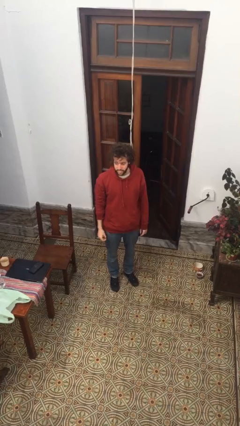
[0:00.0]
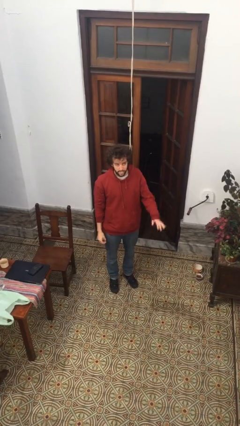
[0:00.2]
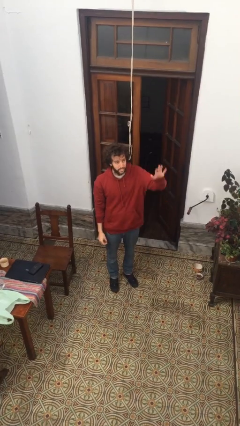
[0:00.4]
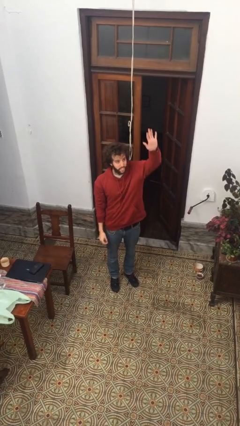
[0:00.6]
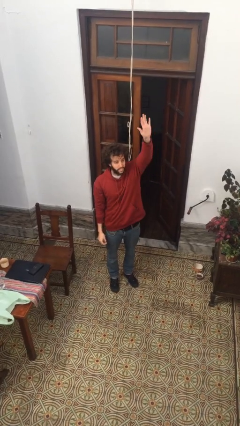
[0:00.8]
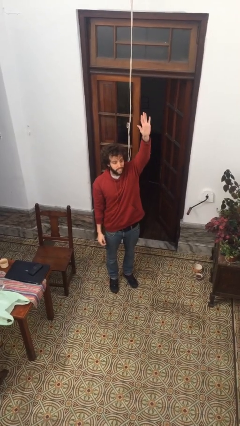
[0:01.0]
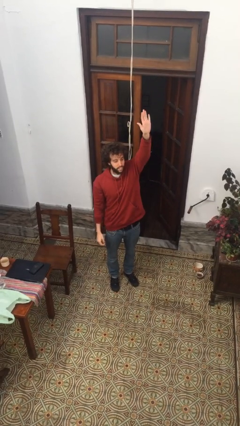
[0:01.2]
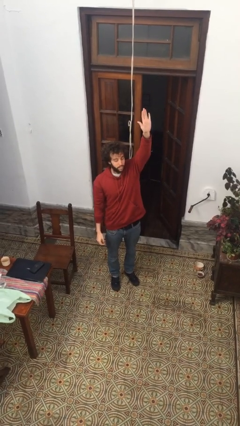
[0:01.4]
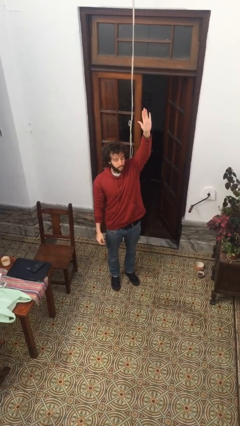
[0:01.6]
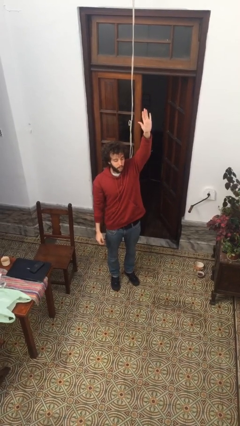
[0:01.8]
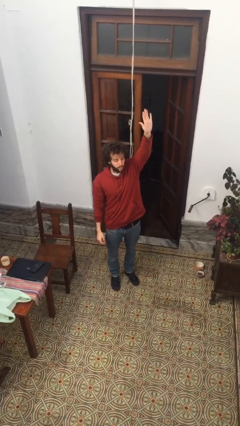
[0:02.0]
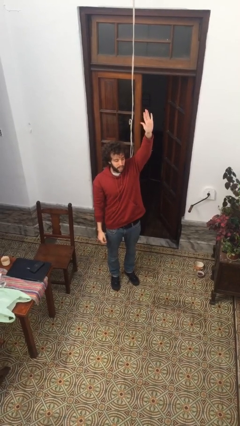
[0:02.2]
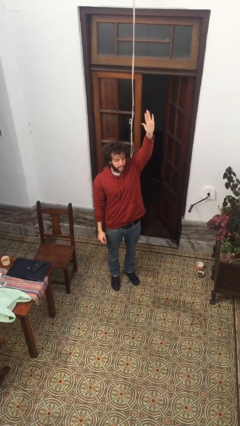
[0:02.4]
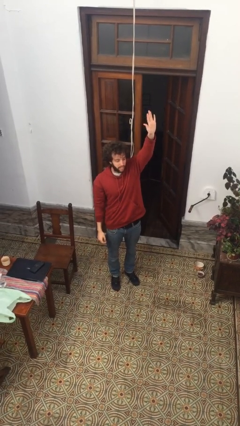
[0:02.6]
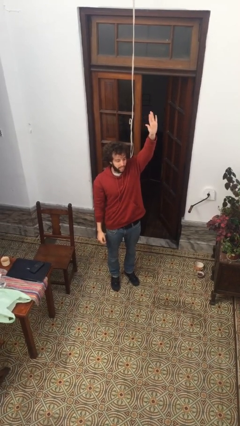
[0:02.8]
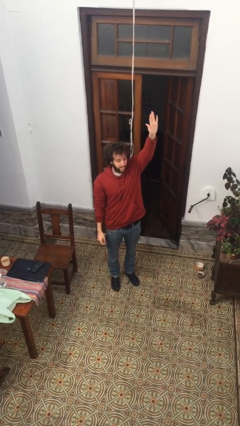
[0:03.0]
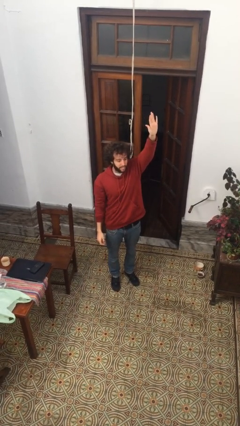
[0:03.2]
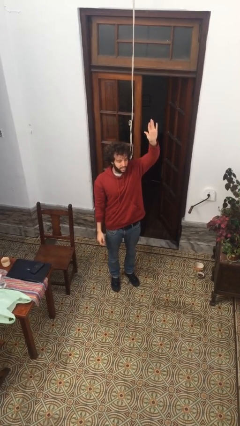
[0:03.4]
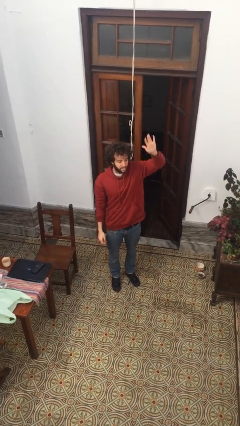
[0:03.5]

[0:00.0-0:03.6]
person gestures raise hand

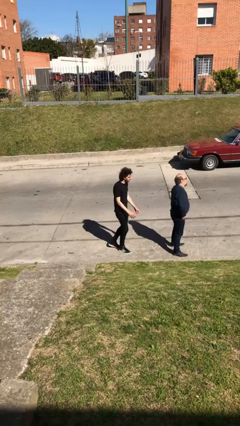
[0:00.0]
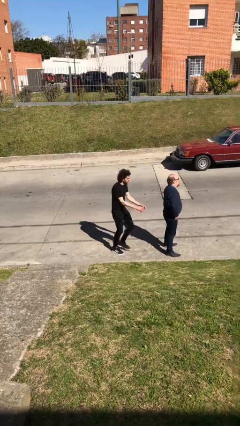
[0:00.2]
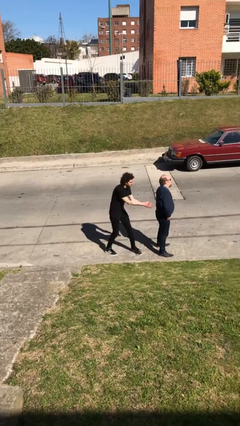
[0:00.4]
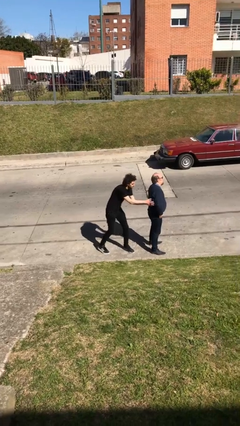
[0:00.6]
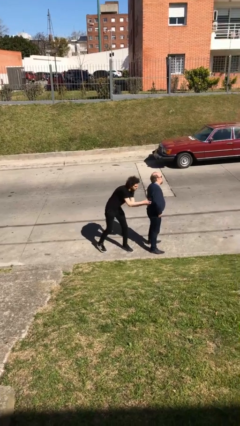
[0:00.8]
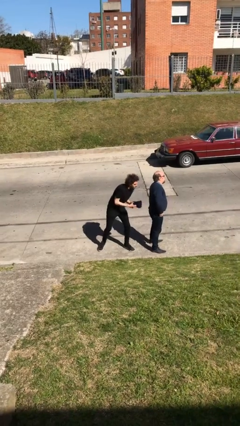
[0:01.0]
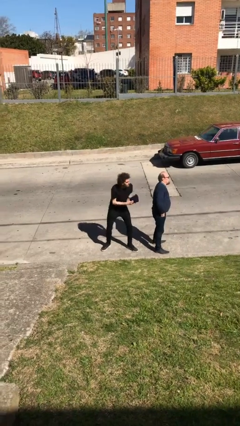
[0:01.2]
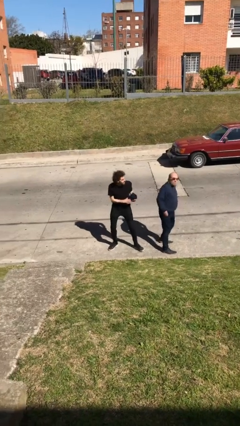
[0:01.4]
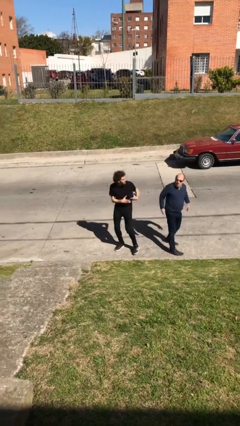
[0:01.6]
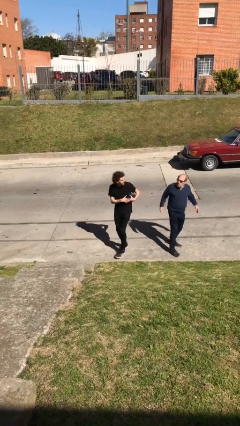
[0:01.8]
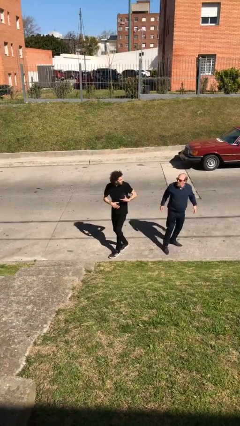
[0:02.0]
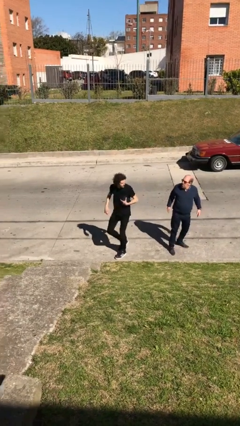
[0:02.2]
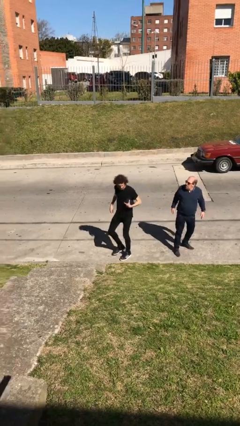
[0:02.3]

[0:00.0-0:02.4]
person steals object from person

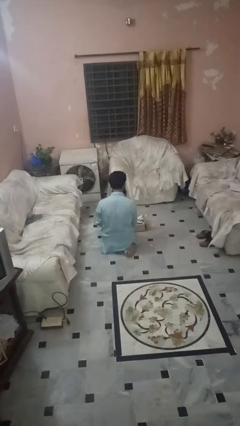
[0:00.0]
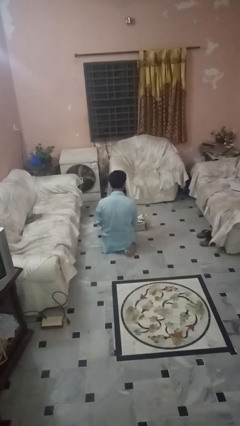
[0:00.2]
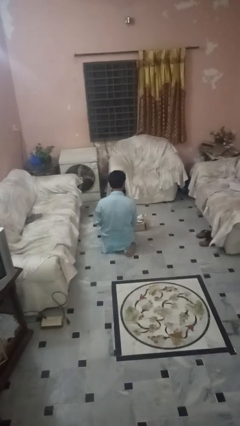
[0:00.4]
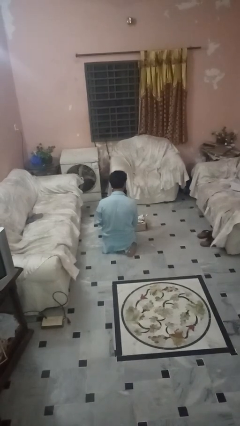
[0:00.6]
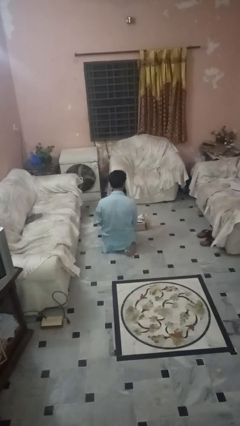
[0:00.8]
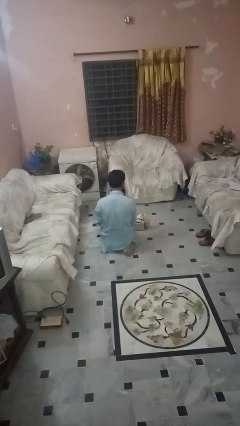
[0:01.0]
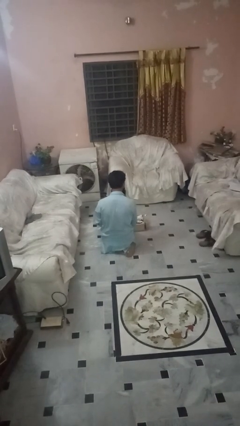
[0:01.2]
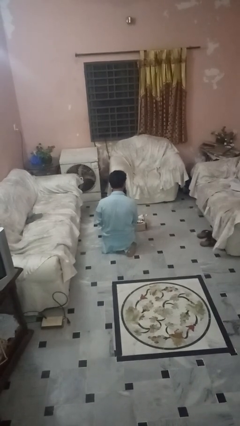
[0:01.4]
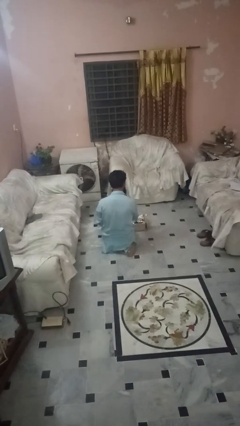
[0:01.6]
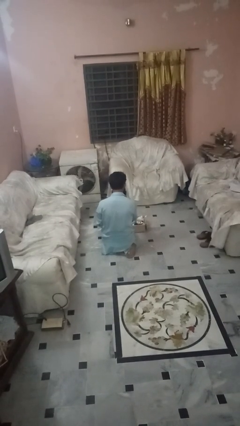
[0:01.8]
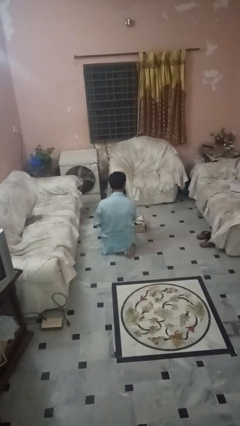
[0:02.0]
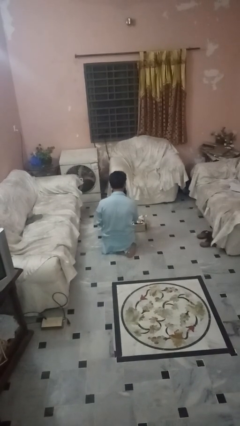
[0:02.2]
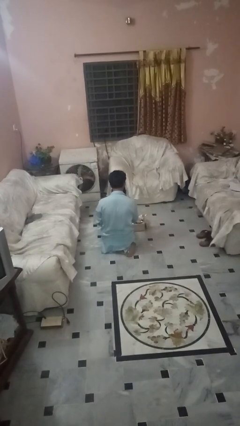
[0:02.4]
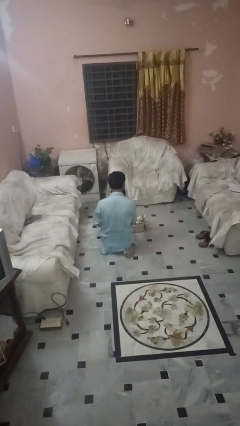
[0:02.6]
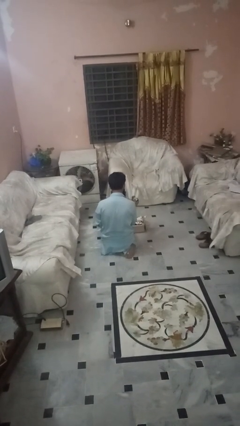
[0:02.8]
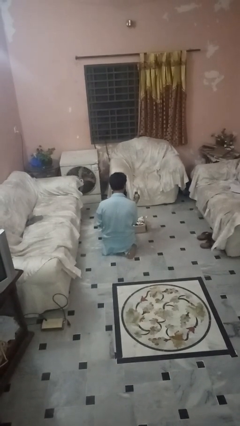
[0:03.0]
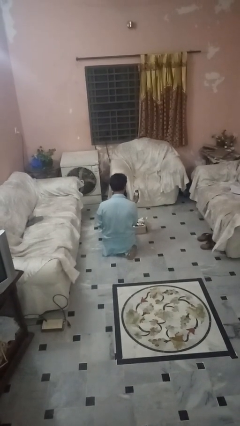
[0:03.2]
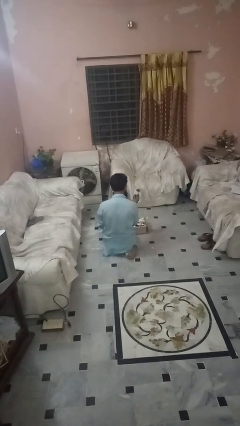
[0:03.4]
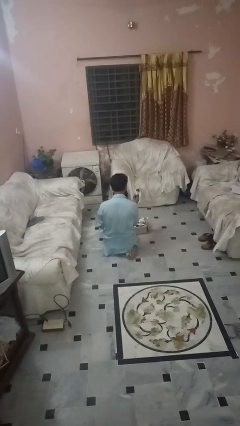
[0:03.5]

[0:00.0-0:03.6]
person takes object from box

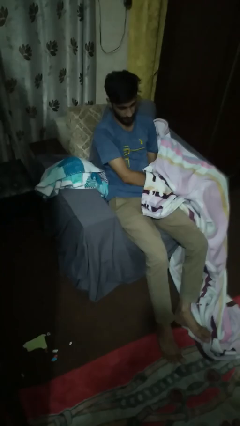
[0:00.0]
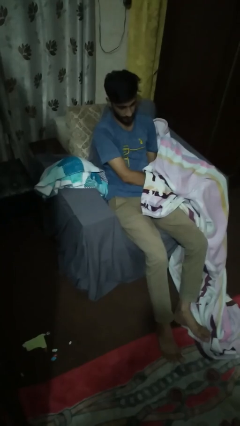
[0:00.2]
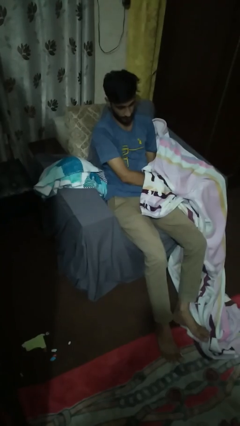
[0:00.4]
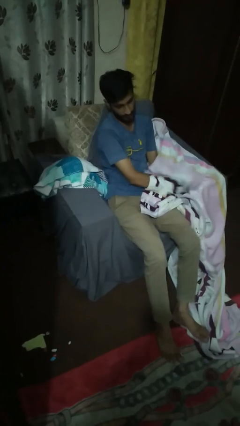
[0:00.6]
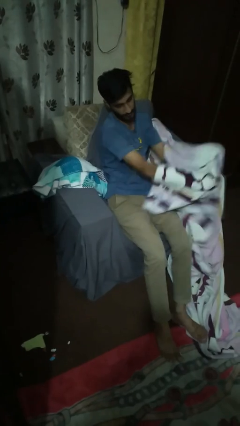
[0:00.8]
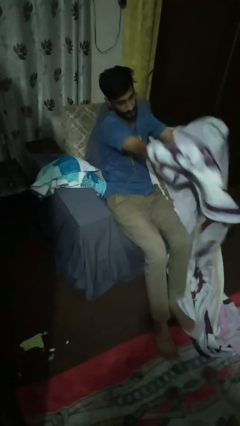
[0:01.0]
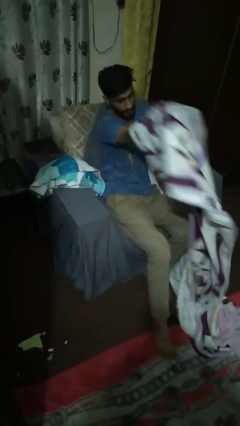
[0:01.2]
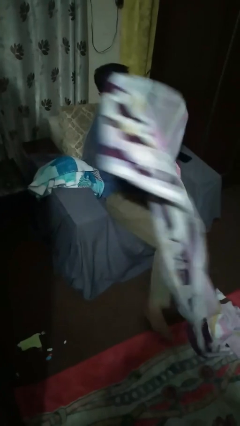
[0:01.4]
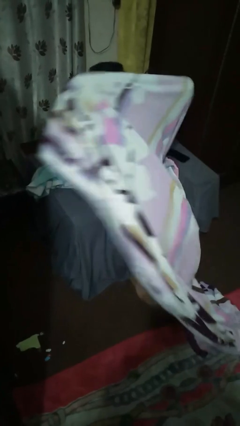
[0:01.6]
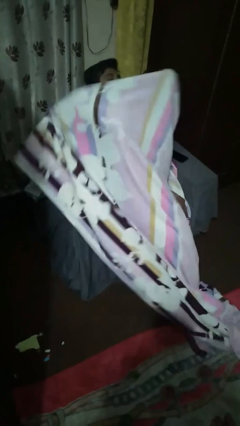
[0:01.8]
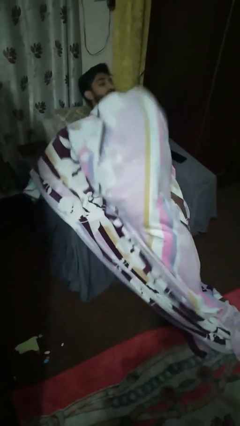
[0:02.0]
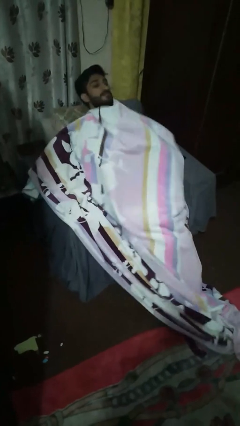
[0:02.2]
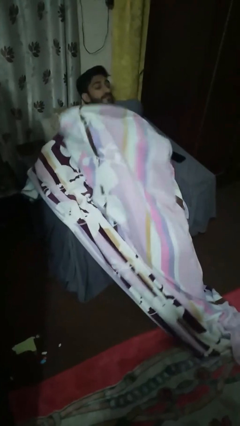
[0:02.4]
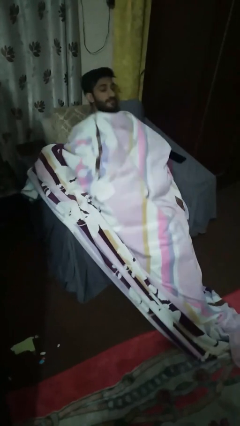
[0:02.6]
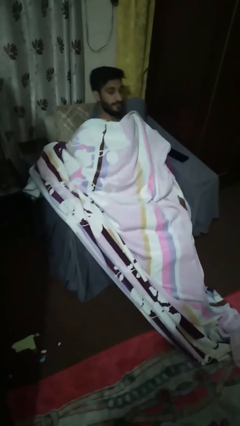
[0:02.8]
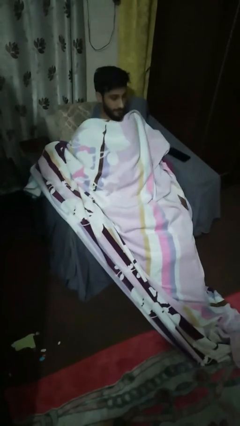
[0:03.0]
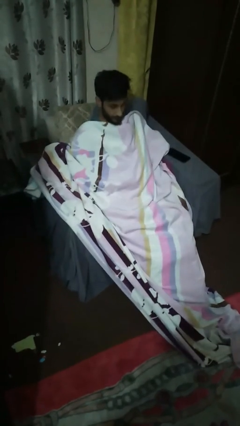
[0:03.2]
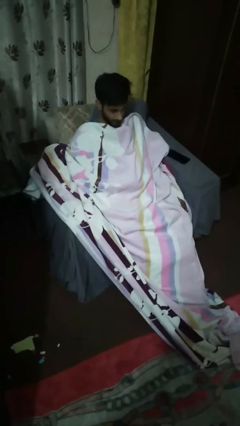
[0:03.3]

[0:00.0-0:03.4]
person covers with blanket

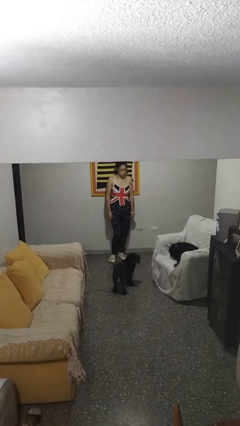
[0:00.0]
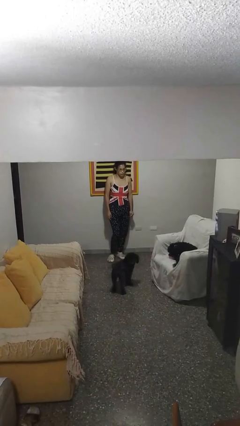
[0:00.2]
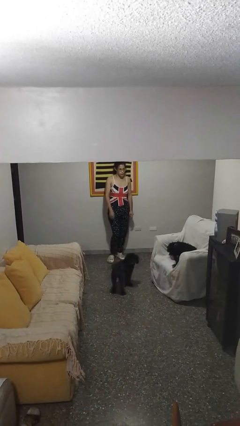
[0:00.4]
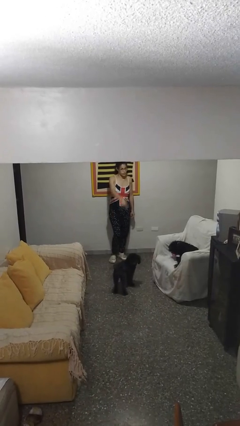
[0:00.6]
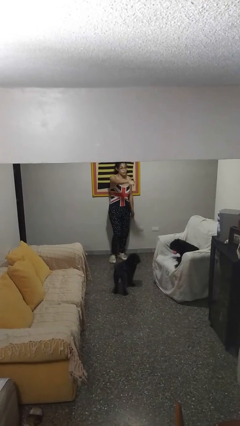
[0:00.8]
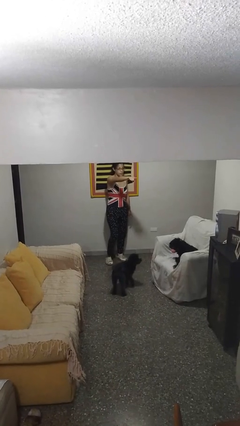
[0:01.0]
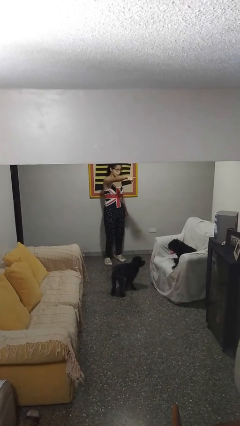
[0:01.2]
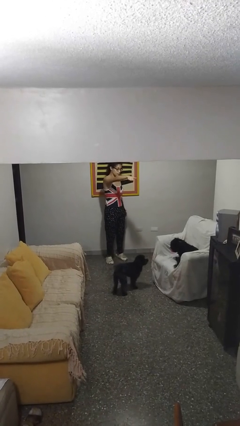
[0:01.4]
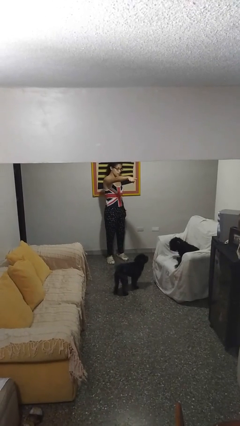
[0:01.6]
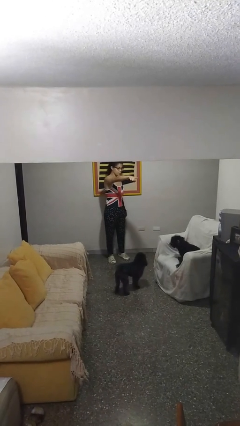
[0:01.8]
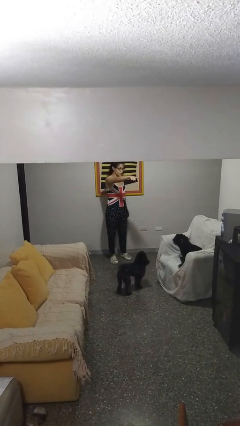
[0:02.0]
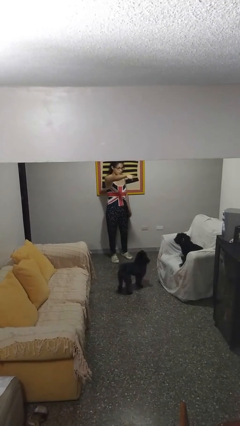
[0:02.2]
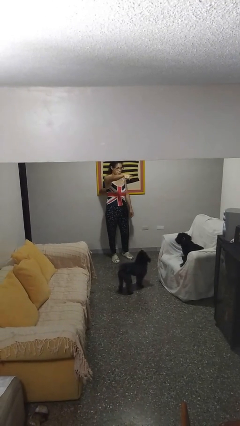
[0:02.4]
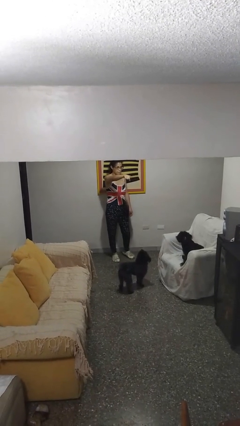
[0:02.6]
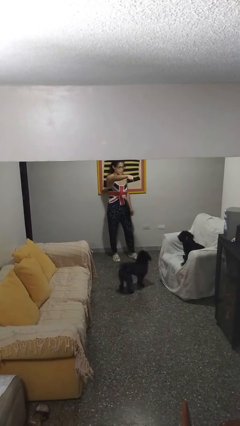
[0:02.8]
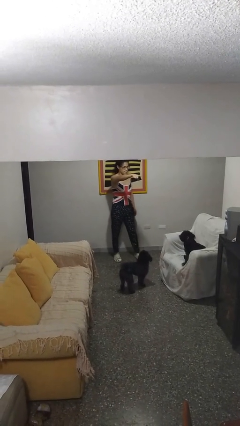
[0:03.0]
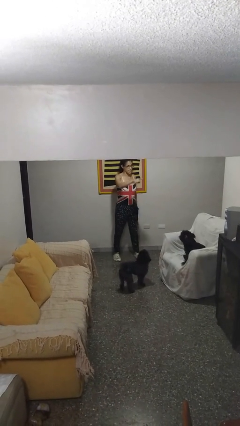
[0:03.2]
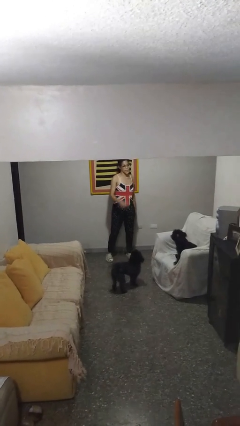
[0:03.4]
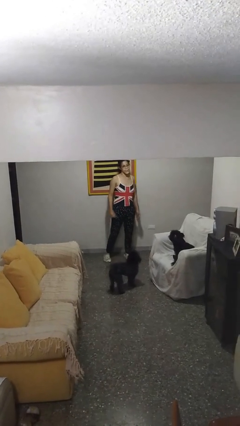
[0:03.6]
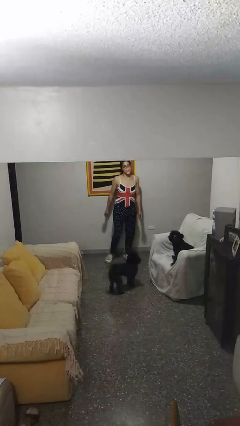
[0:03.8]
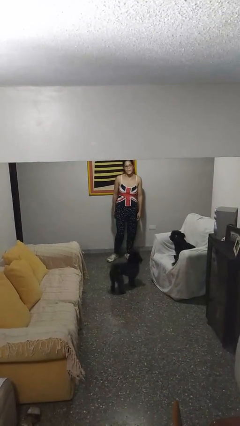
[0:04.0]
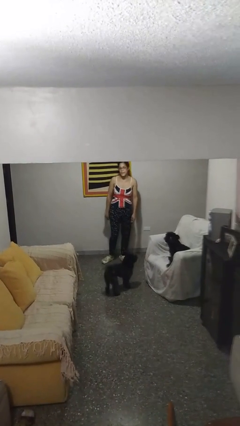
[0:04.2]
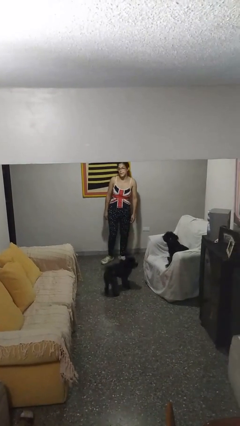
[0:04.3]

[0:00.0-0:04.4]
person points at person

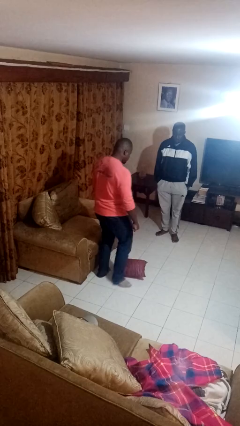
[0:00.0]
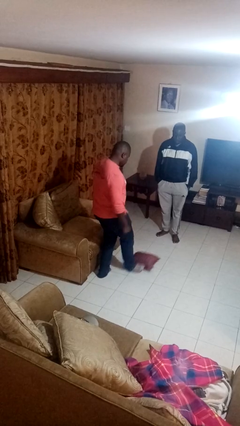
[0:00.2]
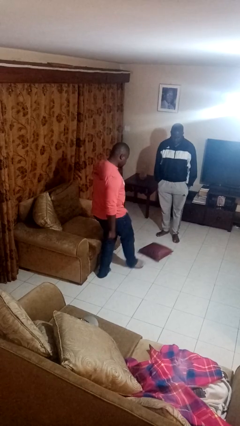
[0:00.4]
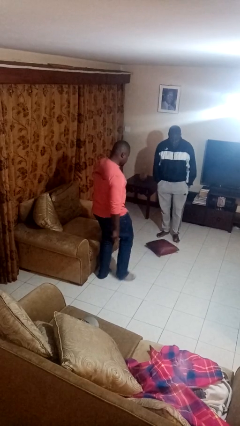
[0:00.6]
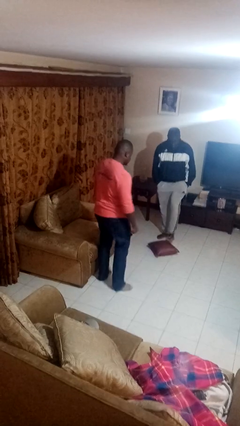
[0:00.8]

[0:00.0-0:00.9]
person kicks object to person
